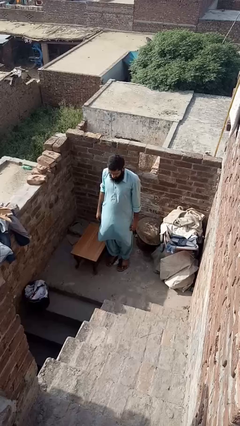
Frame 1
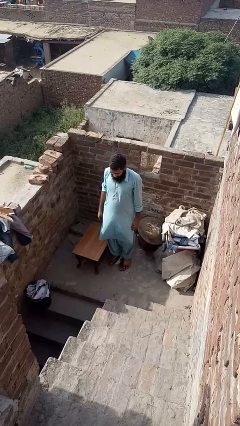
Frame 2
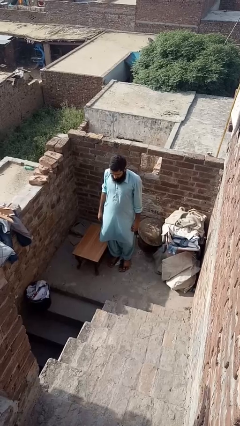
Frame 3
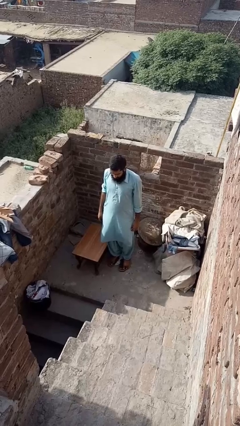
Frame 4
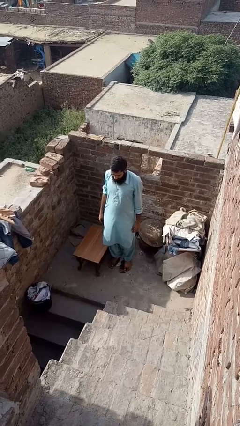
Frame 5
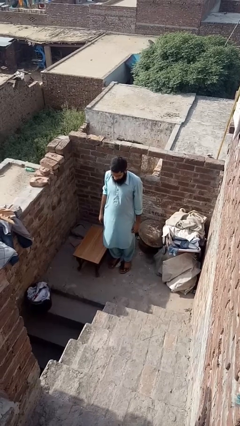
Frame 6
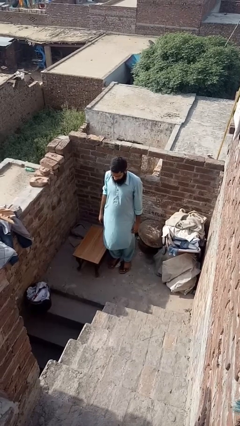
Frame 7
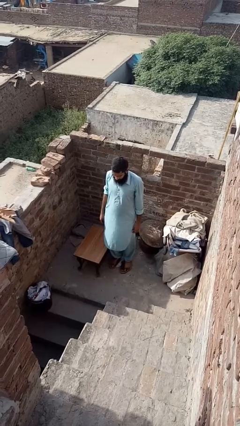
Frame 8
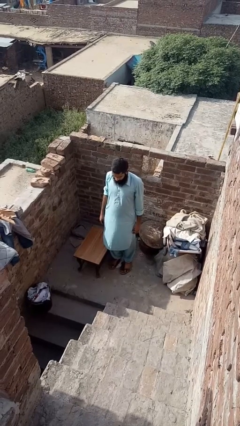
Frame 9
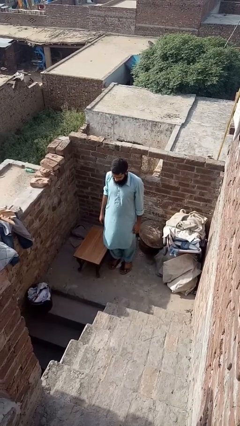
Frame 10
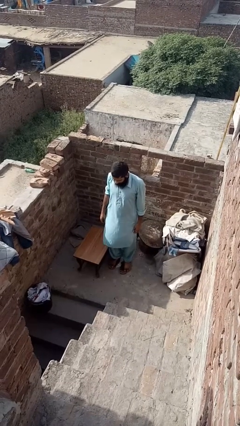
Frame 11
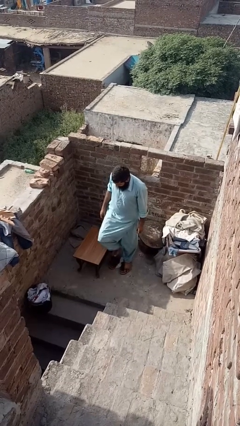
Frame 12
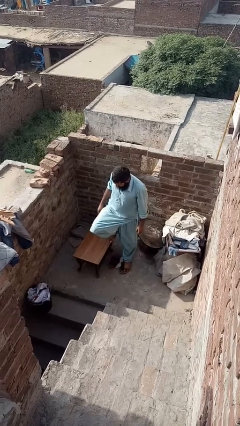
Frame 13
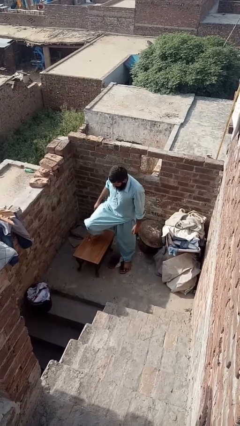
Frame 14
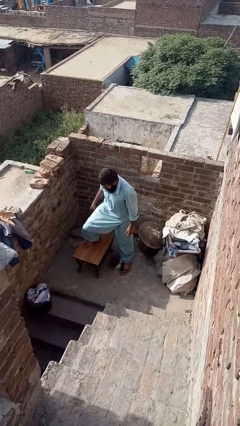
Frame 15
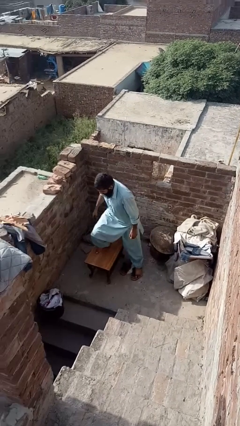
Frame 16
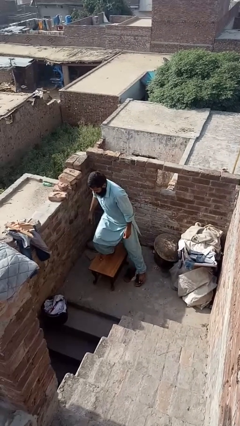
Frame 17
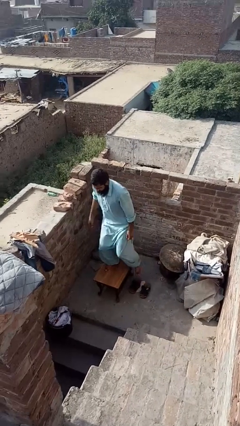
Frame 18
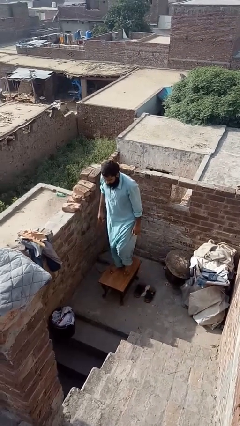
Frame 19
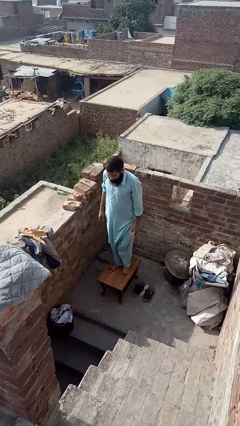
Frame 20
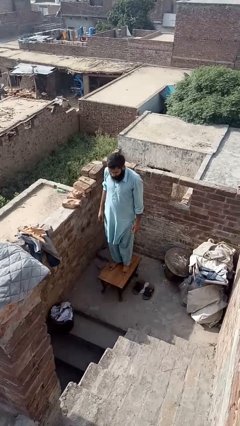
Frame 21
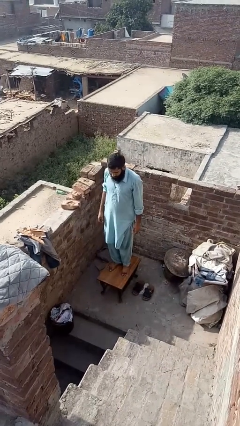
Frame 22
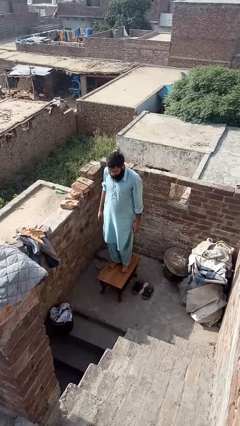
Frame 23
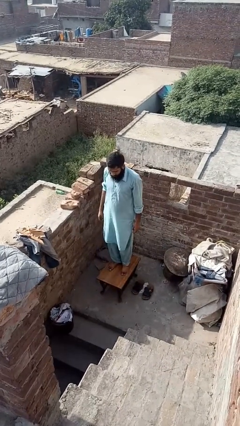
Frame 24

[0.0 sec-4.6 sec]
person climbs on table

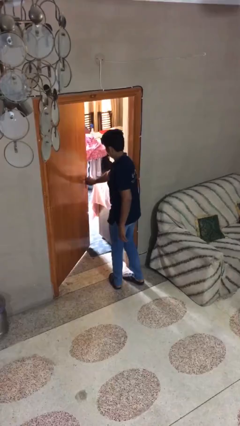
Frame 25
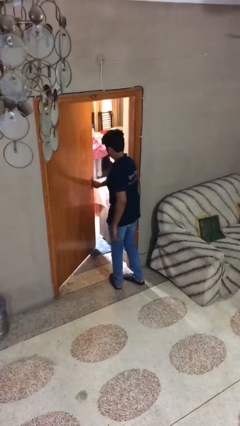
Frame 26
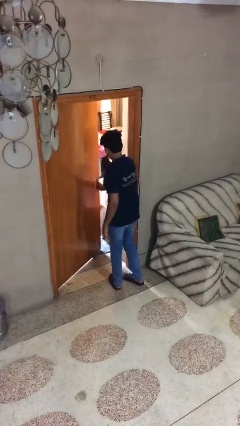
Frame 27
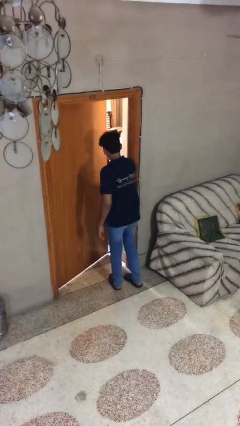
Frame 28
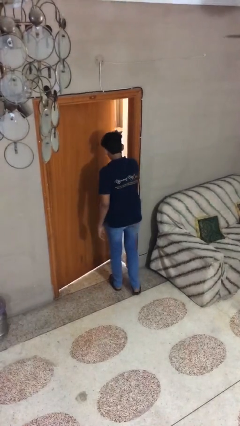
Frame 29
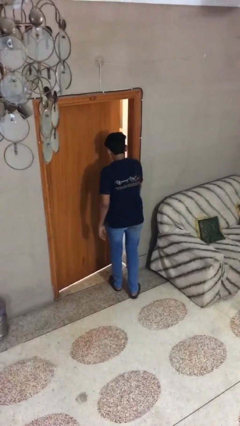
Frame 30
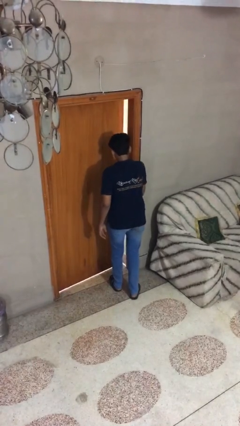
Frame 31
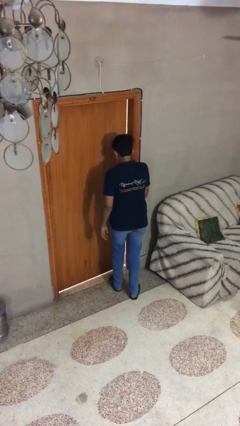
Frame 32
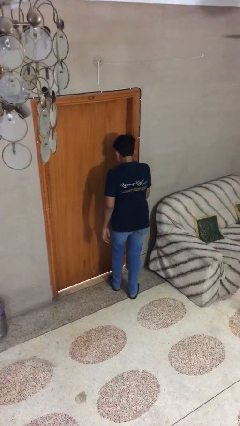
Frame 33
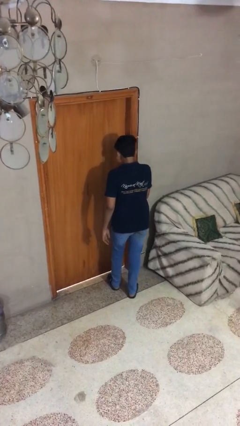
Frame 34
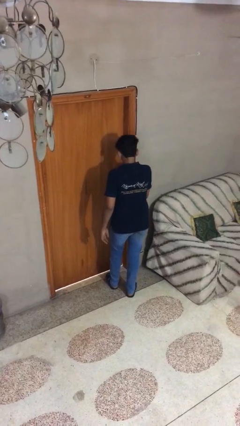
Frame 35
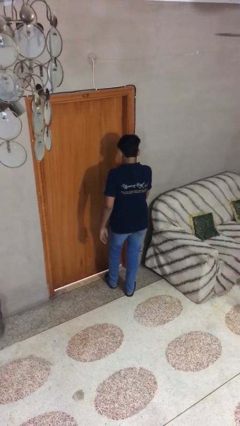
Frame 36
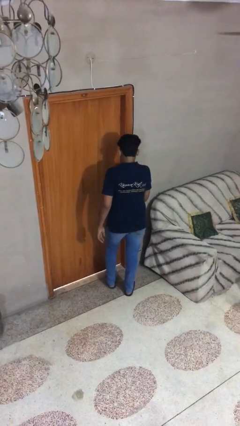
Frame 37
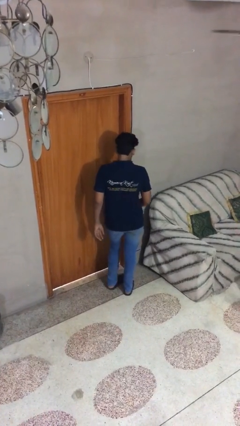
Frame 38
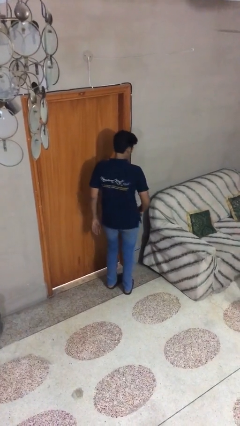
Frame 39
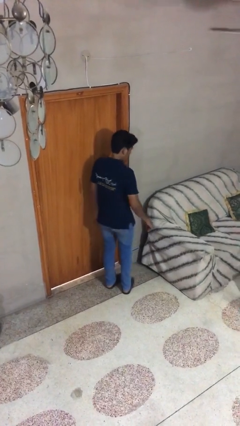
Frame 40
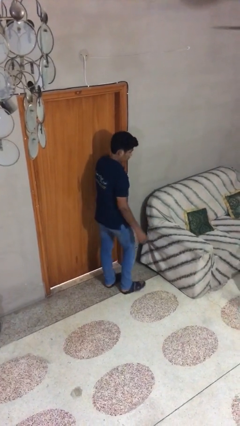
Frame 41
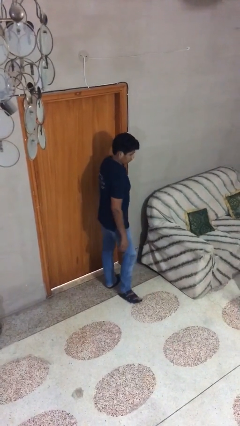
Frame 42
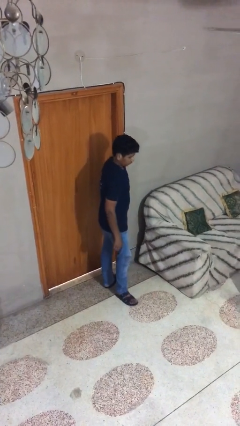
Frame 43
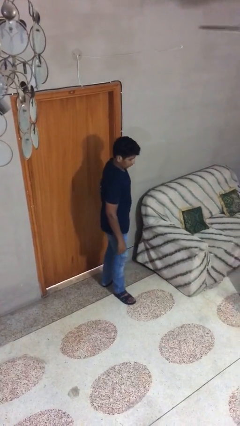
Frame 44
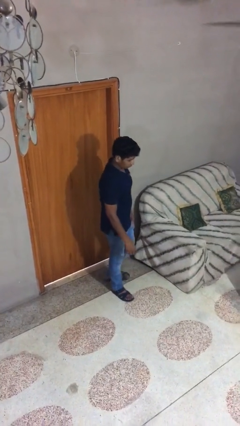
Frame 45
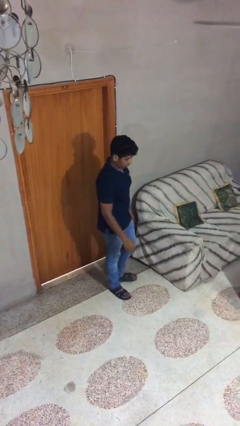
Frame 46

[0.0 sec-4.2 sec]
person closes facility door

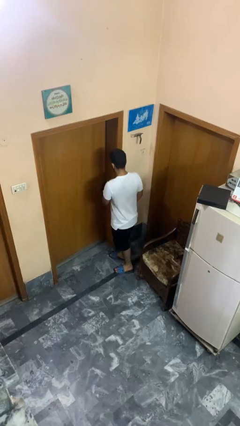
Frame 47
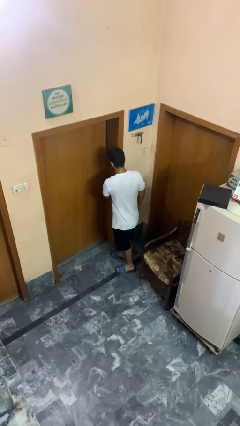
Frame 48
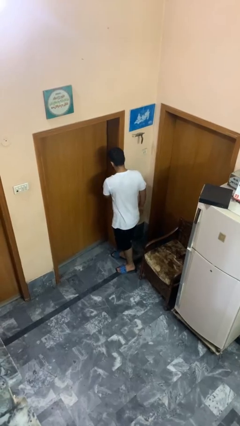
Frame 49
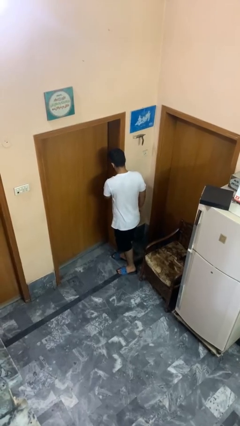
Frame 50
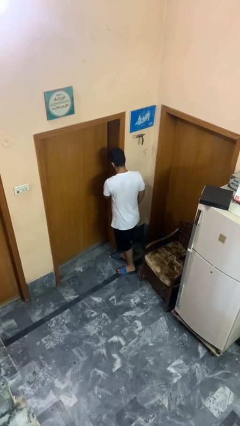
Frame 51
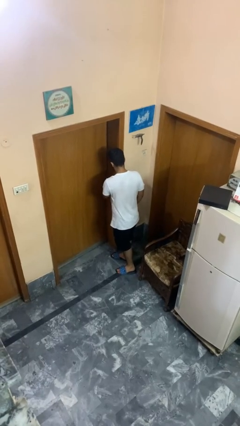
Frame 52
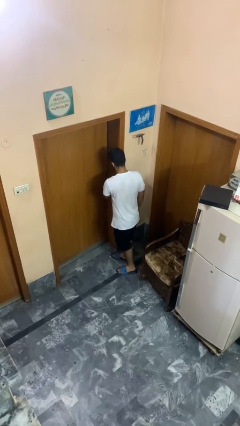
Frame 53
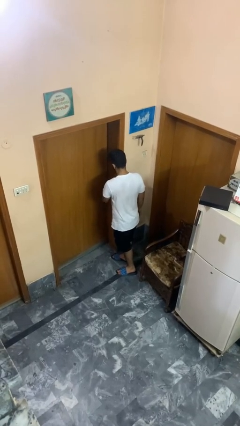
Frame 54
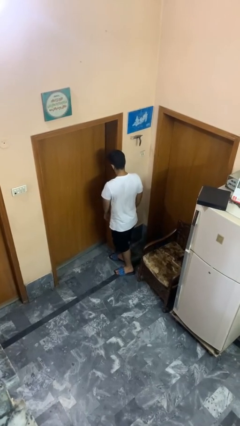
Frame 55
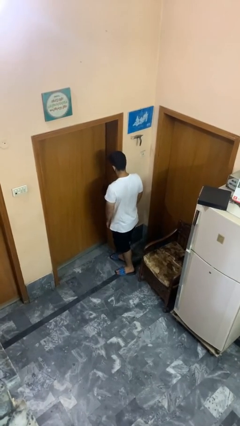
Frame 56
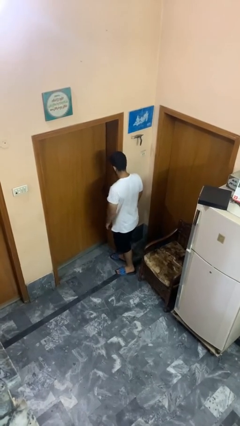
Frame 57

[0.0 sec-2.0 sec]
person locks door with keys

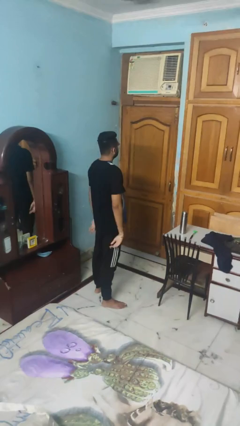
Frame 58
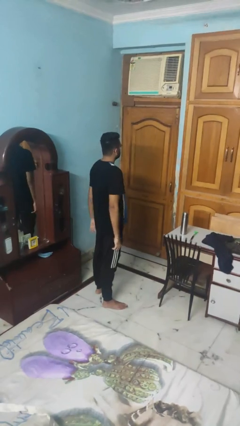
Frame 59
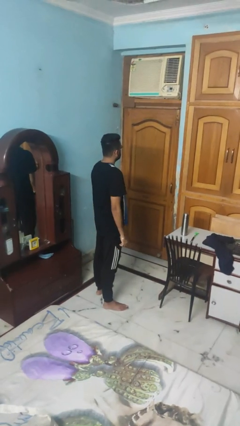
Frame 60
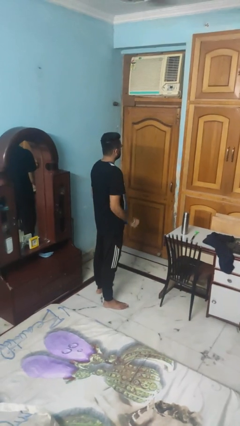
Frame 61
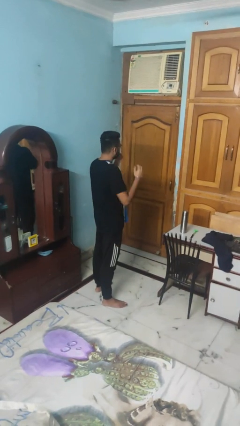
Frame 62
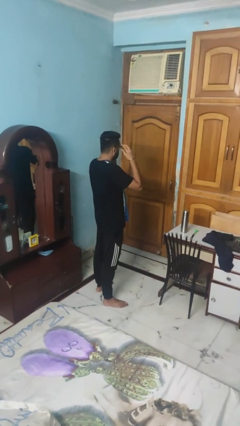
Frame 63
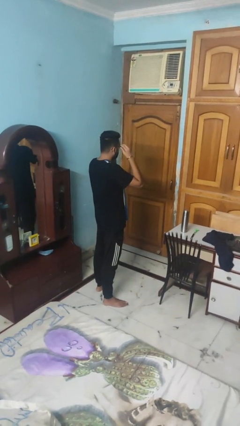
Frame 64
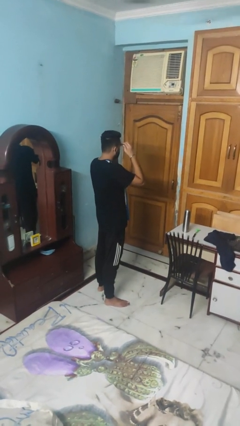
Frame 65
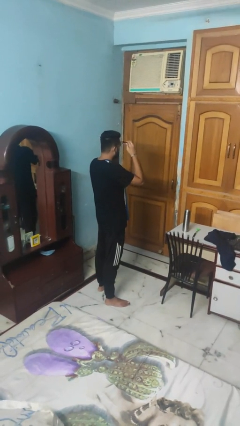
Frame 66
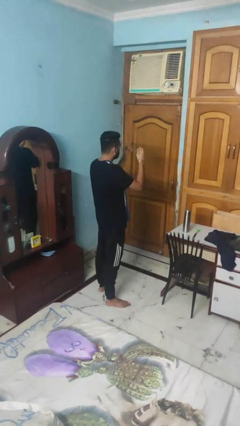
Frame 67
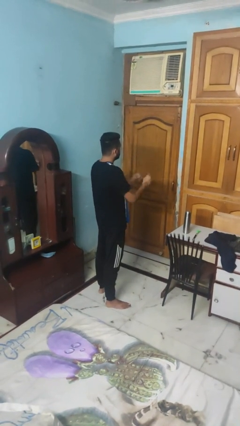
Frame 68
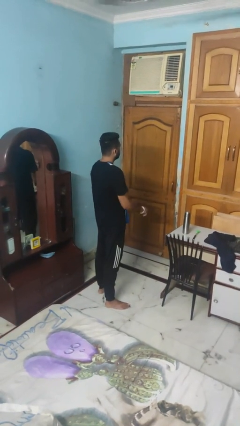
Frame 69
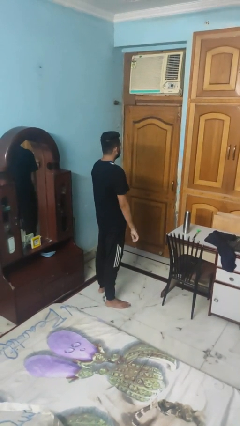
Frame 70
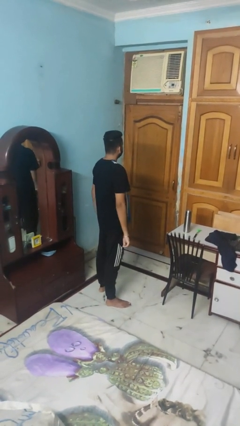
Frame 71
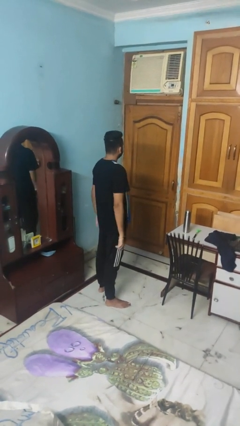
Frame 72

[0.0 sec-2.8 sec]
person takes off glasses

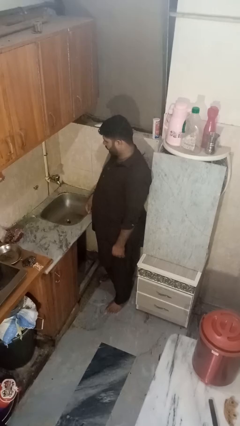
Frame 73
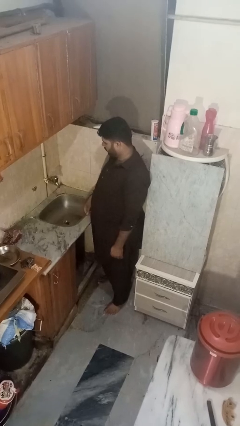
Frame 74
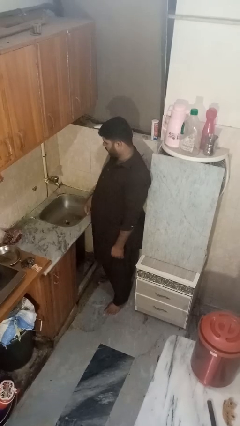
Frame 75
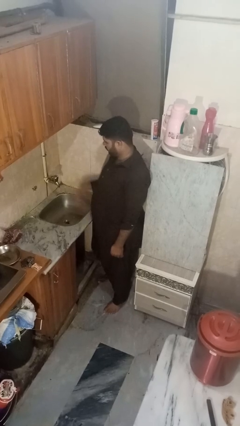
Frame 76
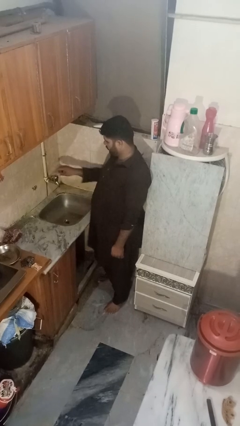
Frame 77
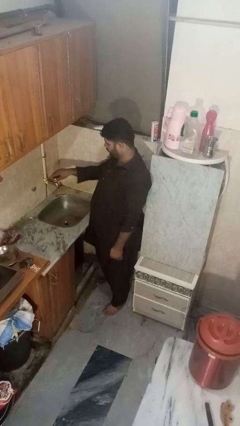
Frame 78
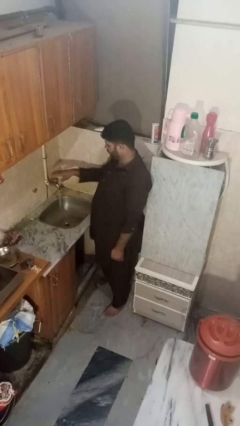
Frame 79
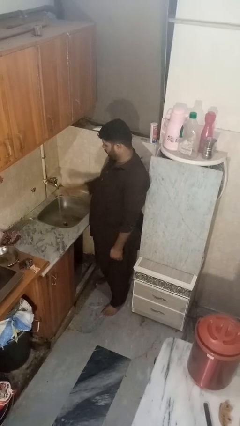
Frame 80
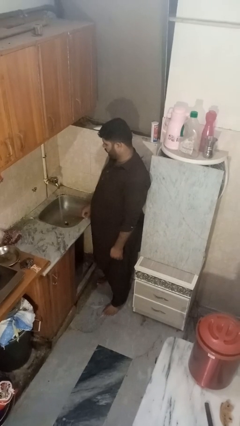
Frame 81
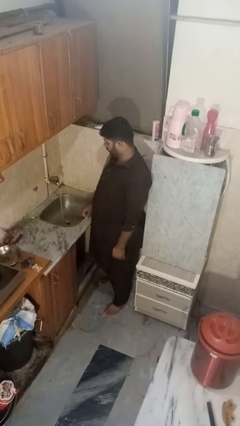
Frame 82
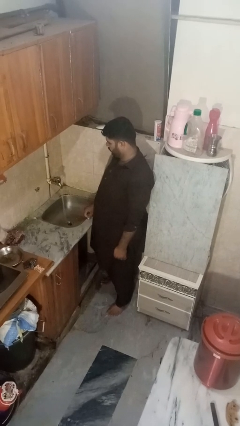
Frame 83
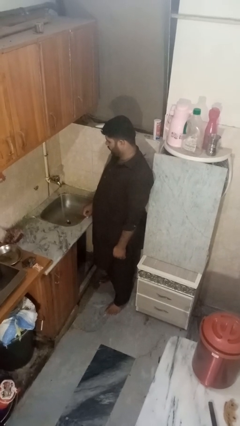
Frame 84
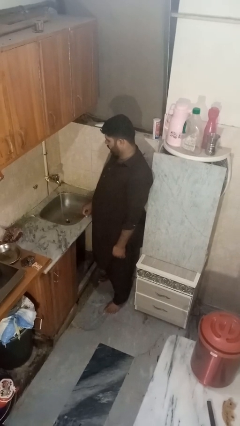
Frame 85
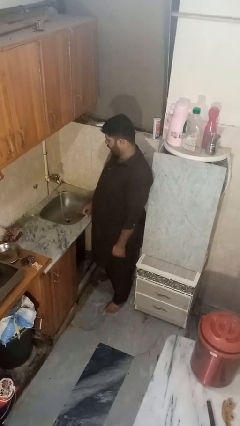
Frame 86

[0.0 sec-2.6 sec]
person turns on faucet

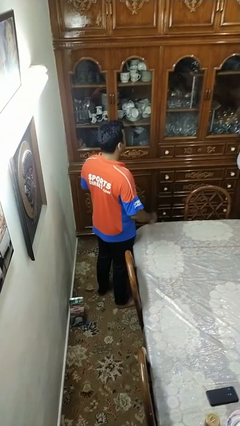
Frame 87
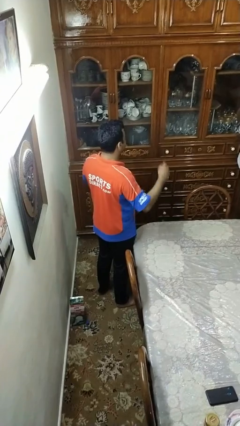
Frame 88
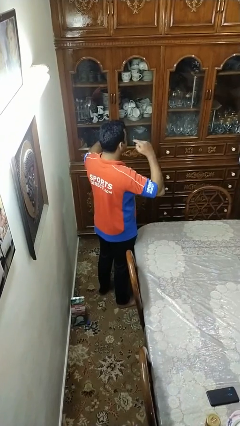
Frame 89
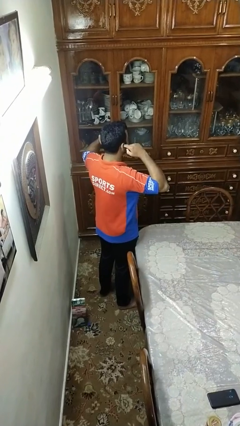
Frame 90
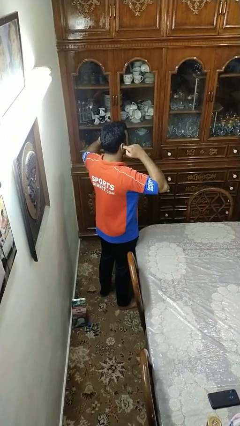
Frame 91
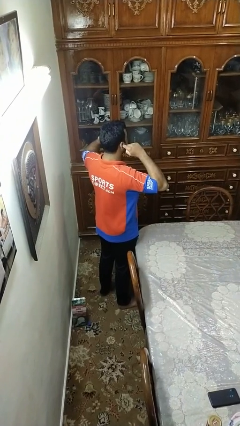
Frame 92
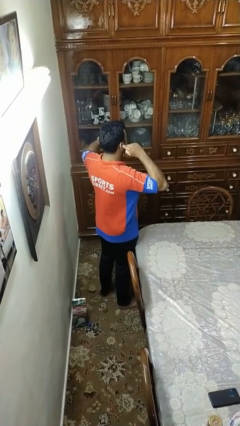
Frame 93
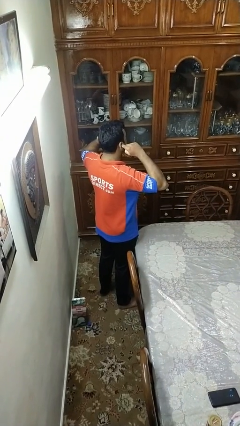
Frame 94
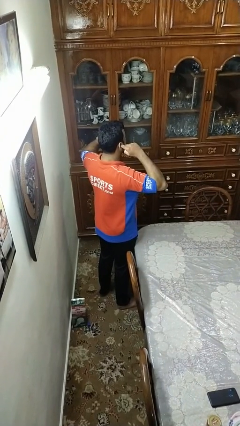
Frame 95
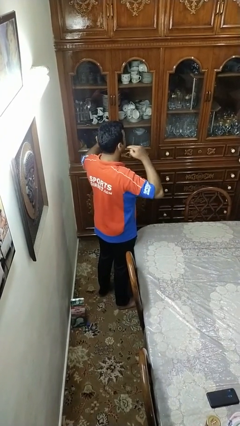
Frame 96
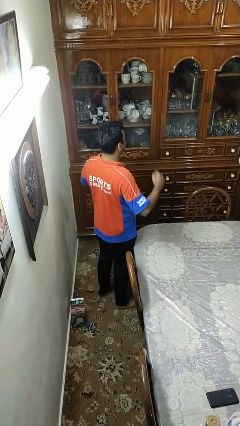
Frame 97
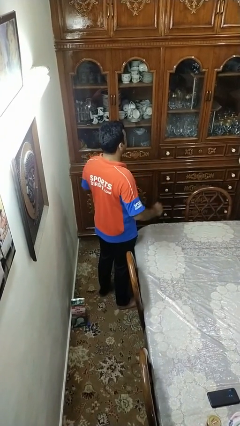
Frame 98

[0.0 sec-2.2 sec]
person puts fingers in ear
